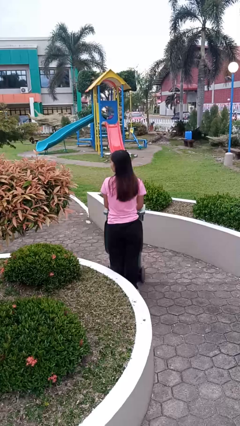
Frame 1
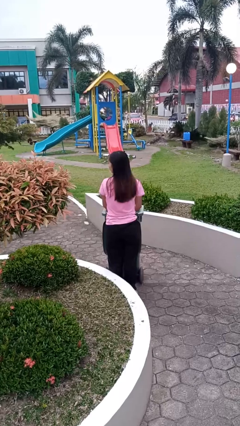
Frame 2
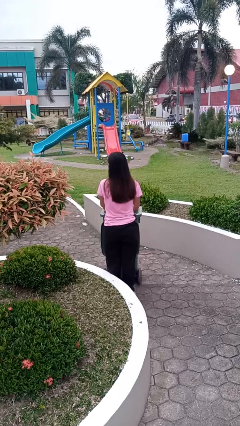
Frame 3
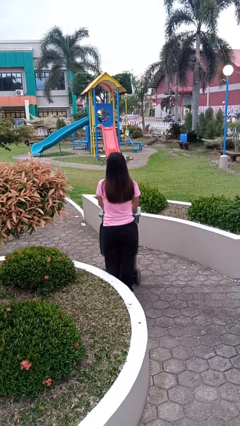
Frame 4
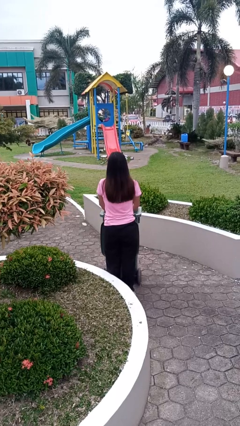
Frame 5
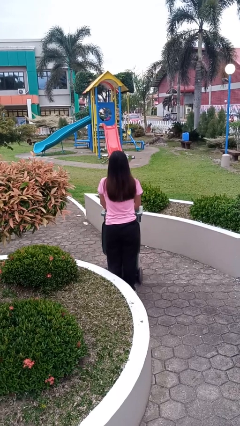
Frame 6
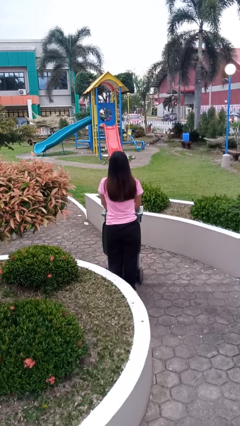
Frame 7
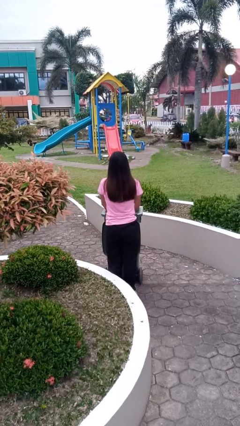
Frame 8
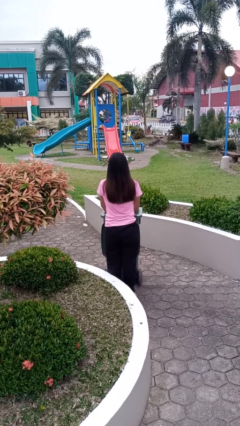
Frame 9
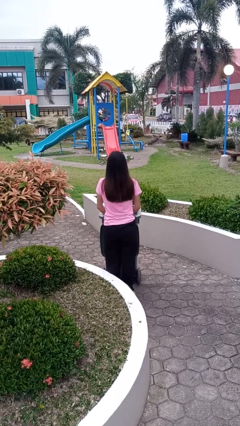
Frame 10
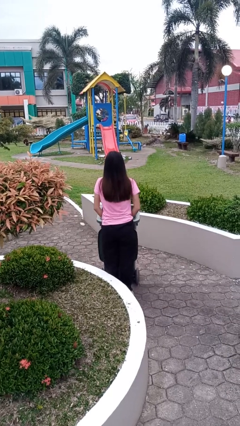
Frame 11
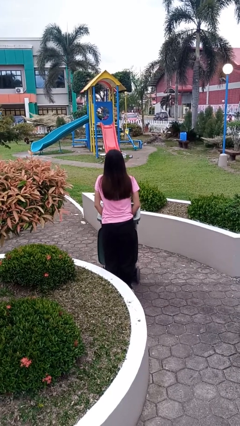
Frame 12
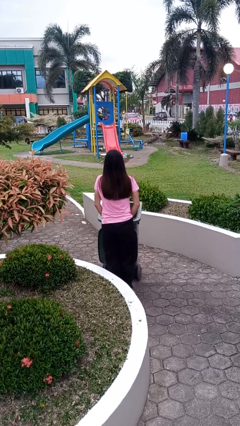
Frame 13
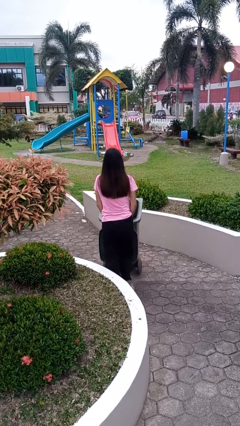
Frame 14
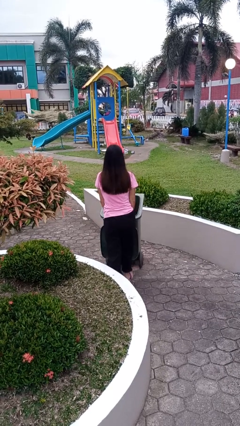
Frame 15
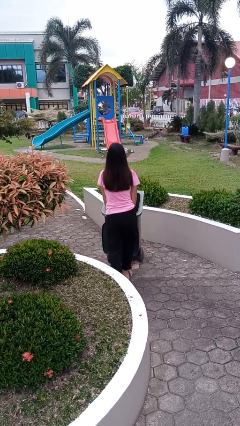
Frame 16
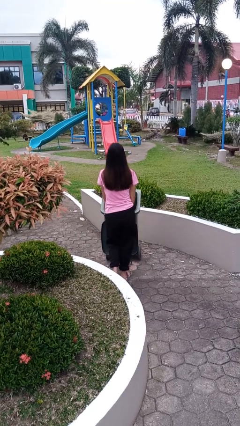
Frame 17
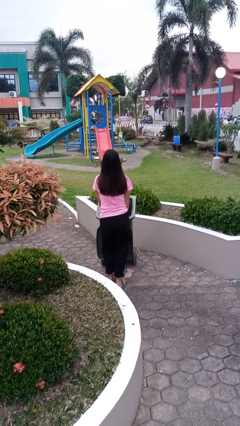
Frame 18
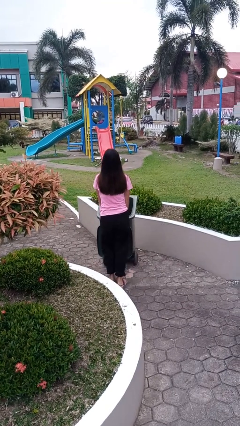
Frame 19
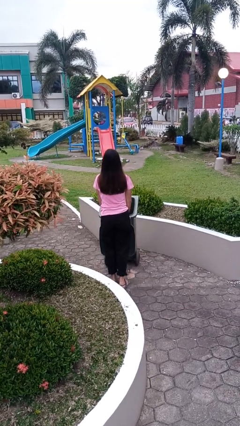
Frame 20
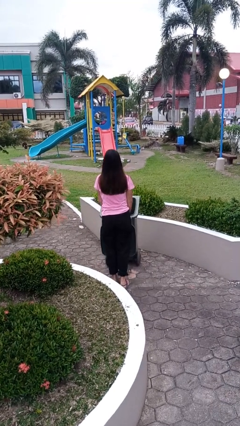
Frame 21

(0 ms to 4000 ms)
person pushes wheeled trashcan

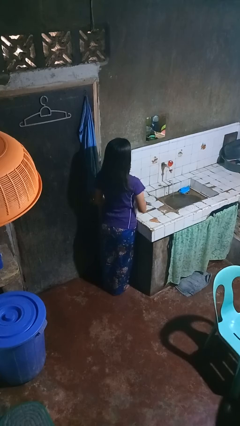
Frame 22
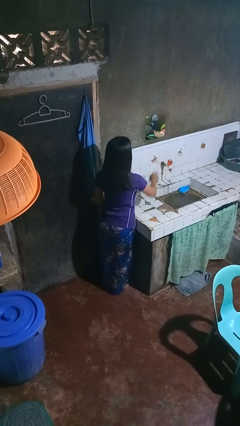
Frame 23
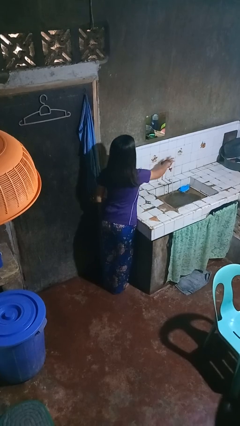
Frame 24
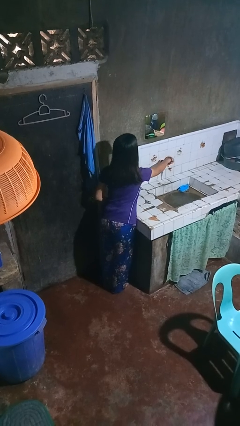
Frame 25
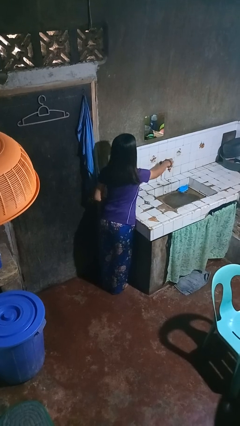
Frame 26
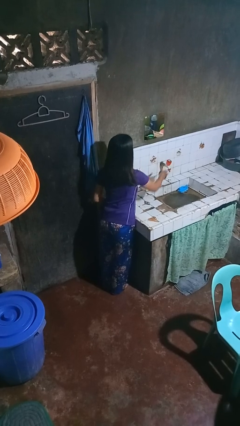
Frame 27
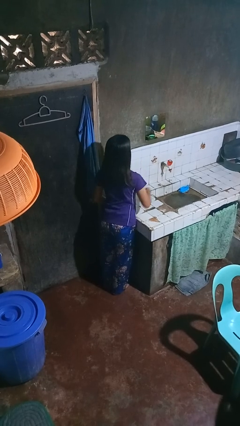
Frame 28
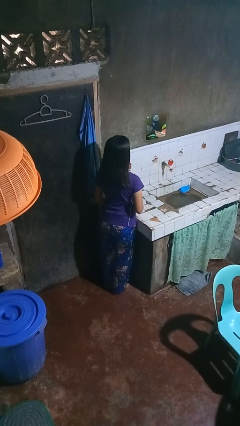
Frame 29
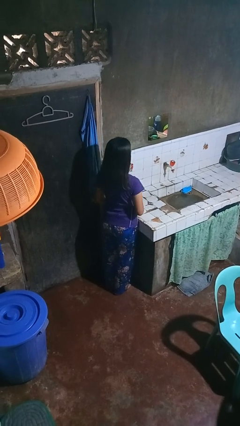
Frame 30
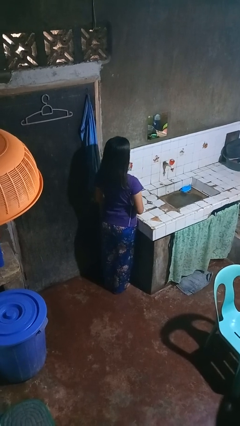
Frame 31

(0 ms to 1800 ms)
person turns off faucet

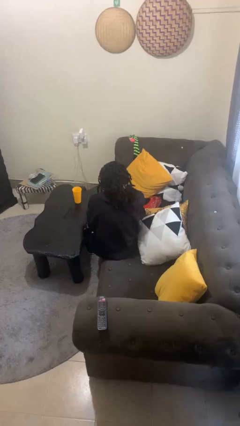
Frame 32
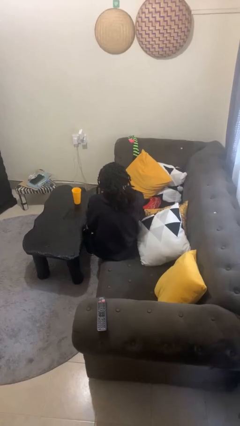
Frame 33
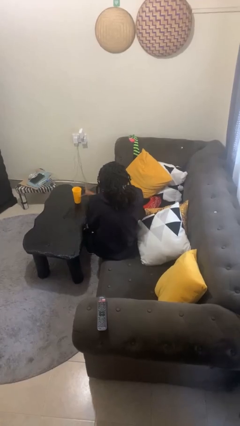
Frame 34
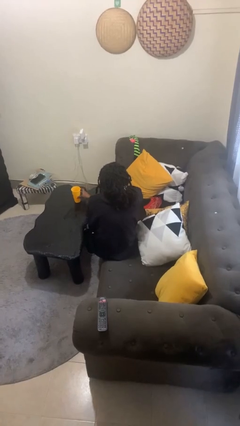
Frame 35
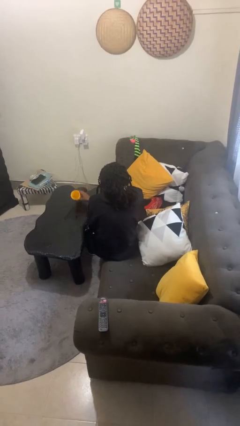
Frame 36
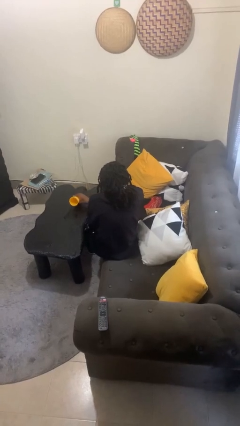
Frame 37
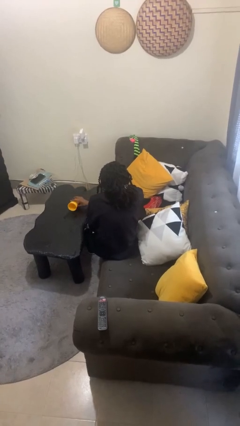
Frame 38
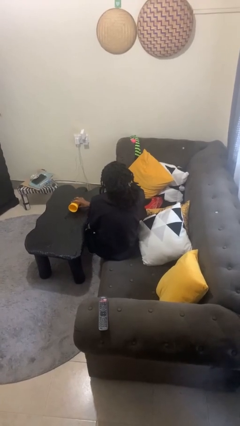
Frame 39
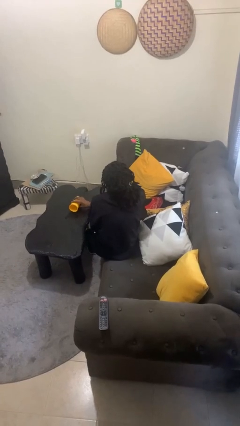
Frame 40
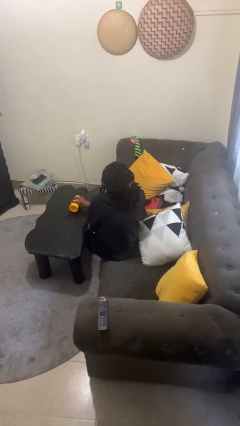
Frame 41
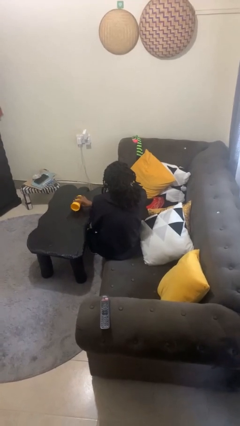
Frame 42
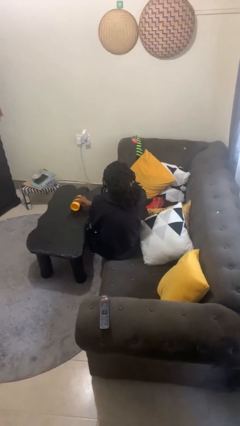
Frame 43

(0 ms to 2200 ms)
person spills on table

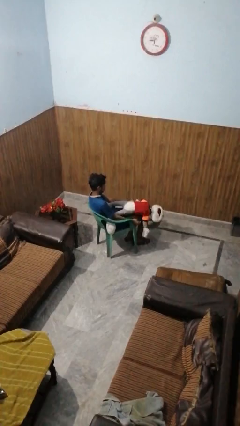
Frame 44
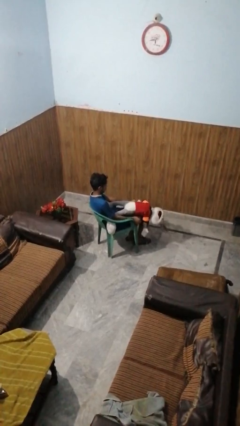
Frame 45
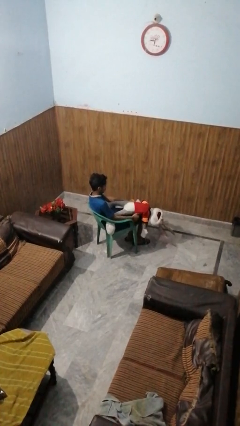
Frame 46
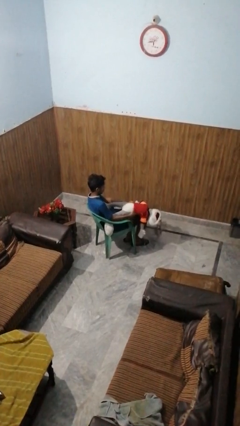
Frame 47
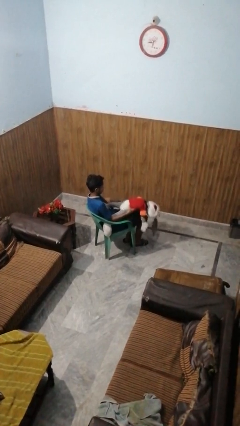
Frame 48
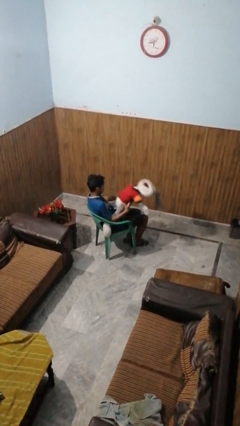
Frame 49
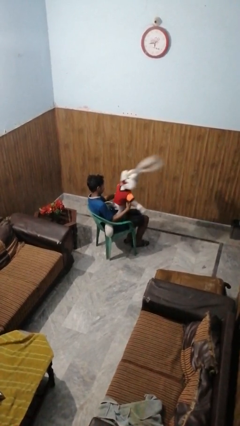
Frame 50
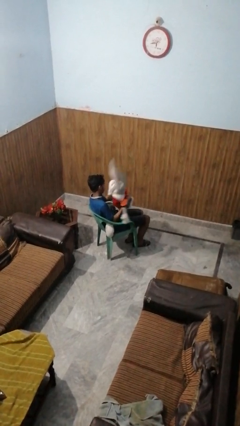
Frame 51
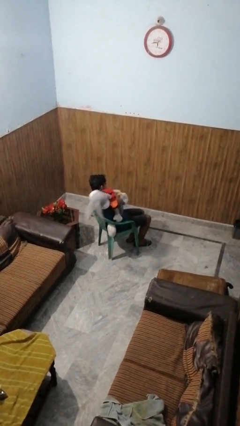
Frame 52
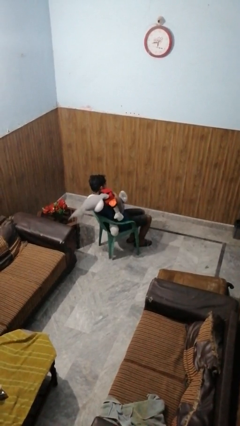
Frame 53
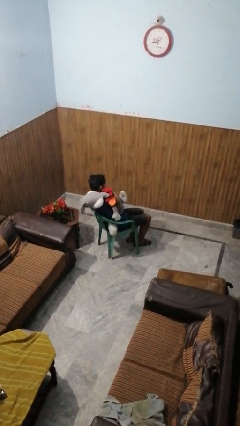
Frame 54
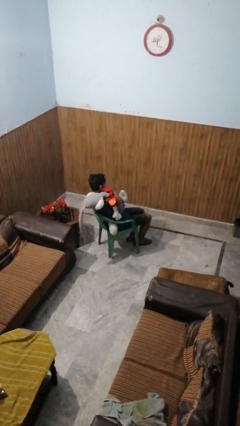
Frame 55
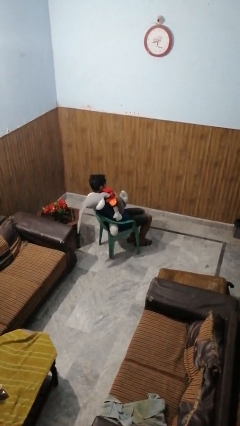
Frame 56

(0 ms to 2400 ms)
person hugs stuffed animal

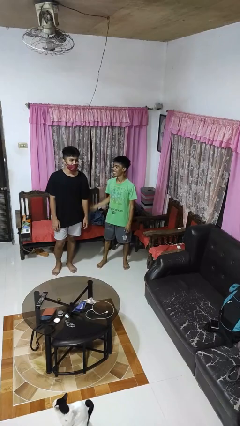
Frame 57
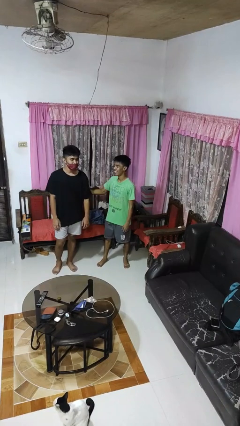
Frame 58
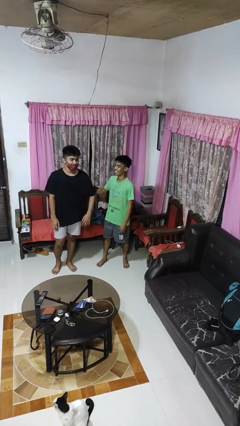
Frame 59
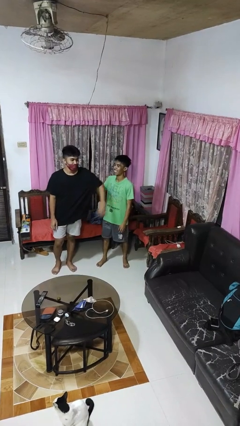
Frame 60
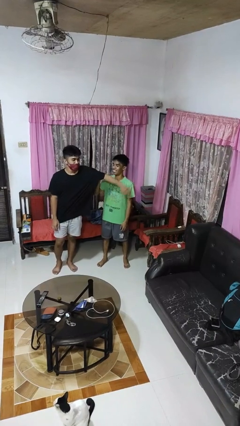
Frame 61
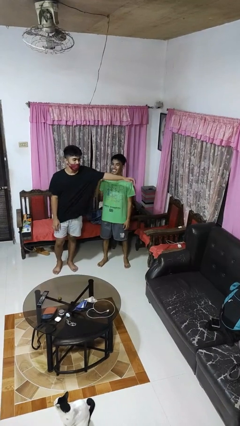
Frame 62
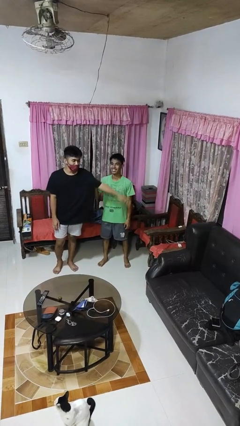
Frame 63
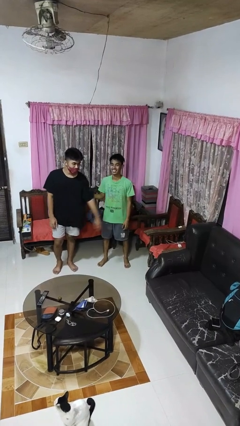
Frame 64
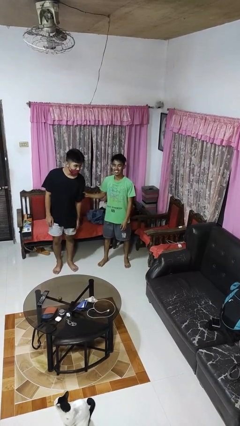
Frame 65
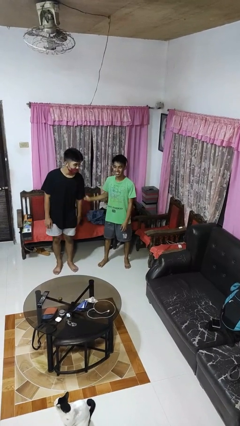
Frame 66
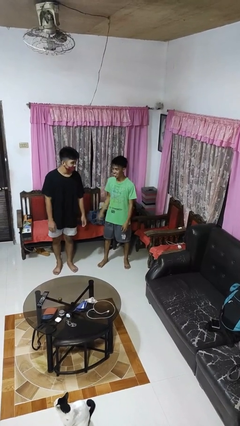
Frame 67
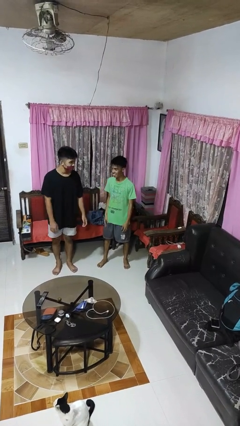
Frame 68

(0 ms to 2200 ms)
person grabs person by bicep

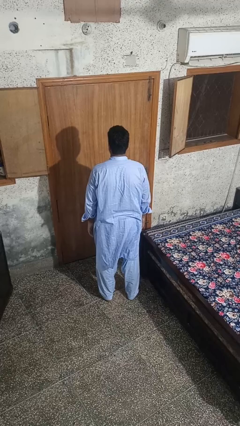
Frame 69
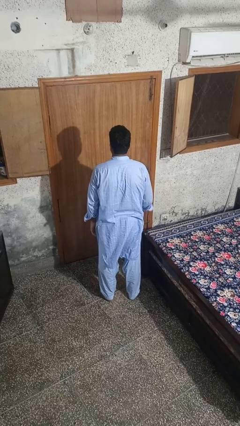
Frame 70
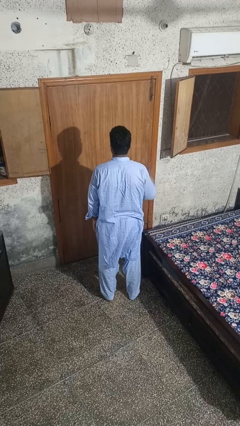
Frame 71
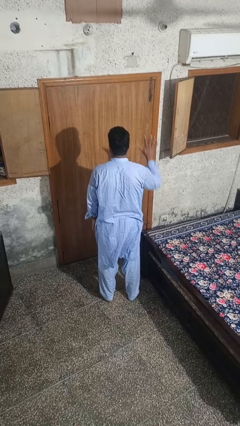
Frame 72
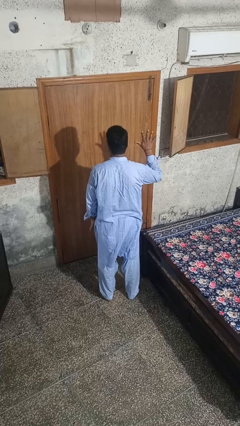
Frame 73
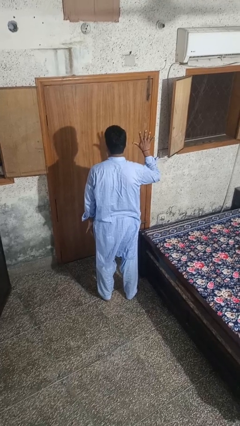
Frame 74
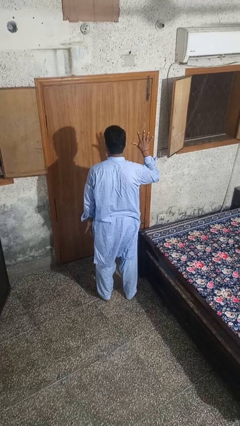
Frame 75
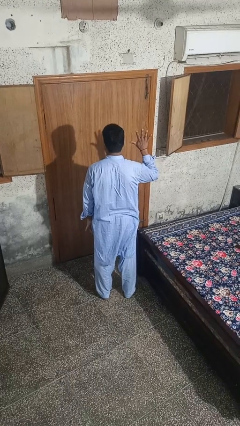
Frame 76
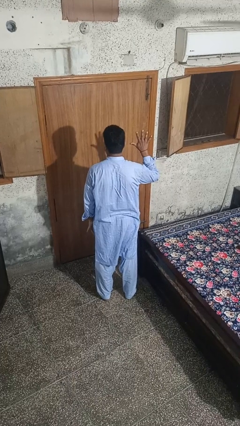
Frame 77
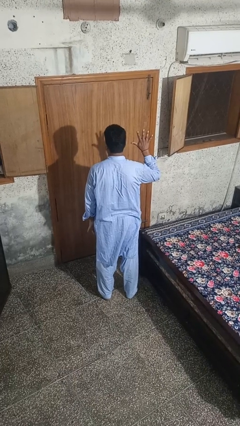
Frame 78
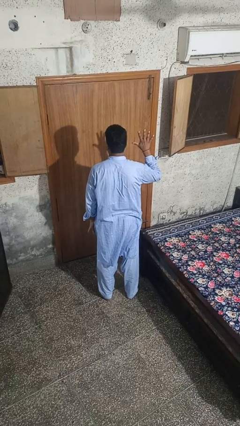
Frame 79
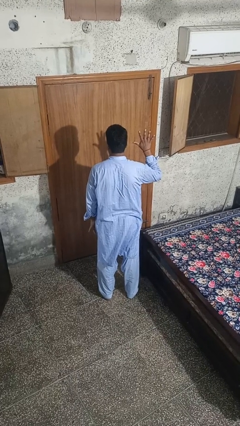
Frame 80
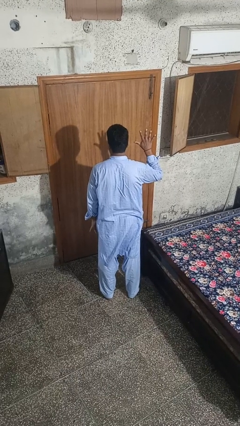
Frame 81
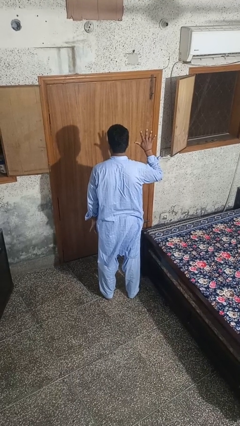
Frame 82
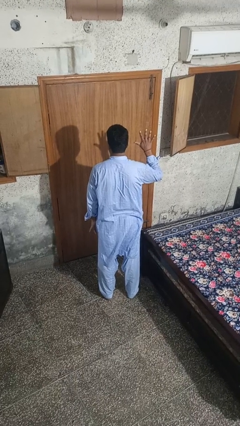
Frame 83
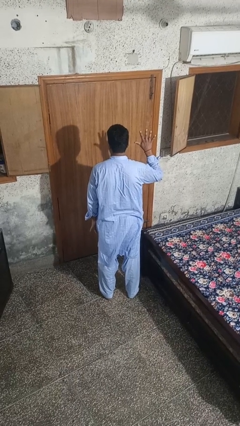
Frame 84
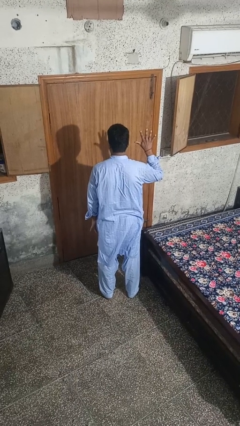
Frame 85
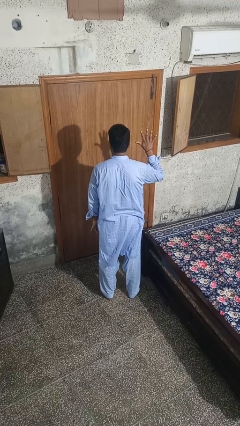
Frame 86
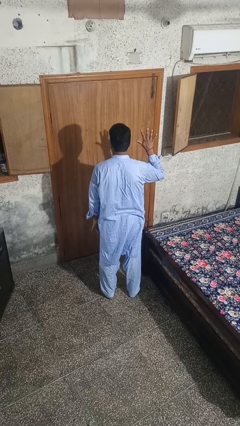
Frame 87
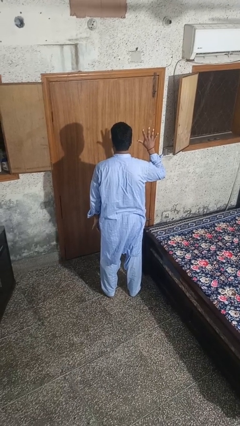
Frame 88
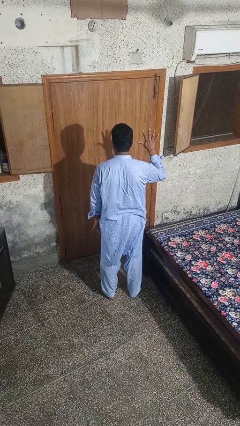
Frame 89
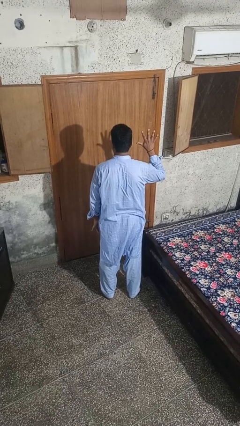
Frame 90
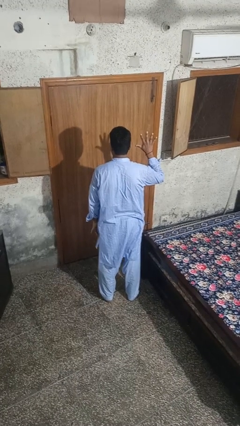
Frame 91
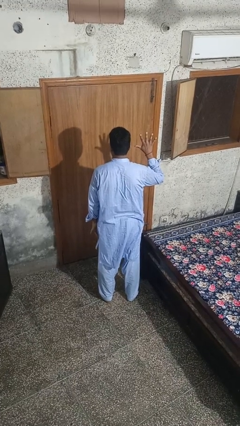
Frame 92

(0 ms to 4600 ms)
person gestures number five
